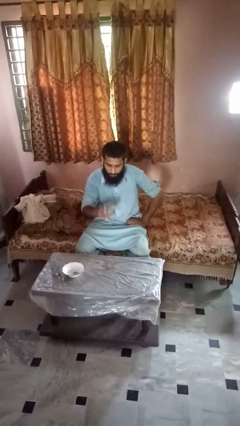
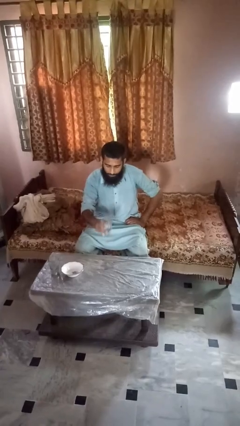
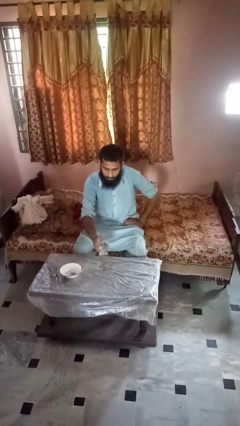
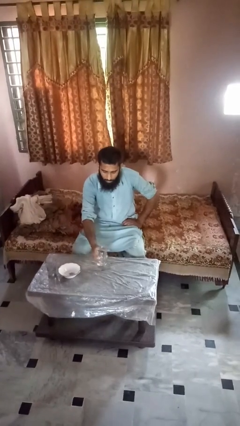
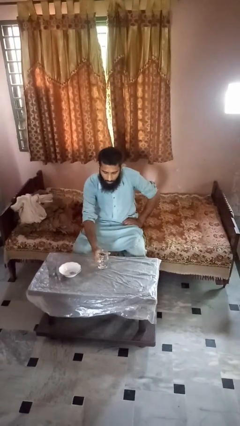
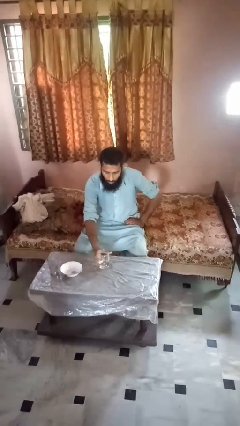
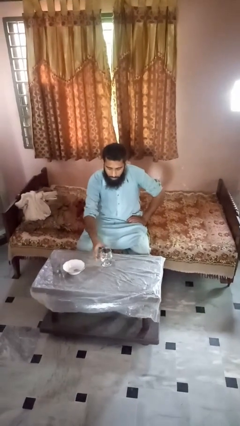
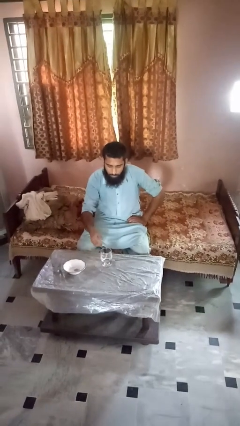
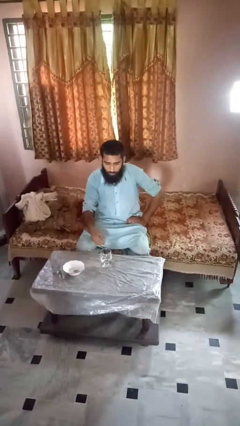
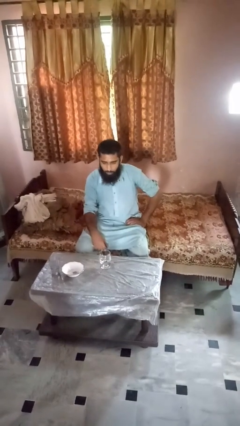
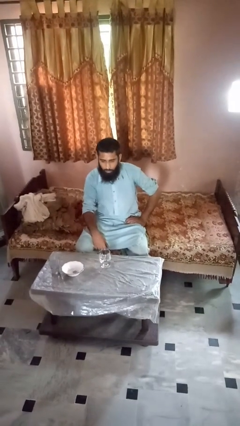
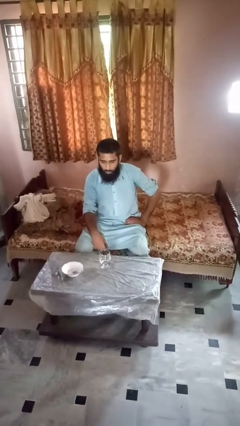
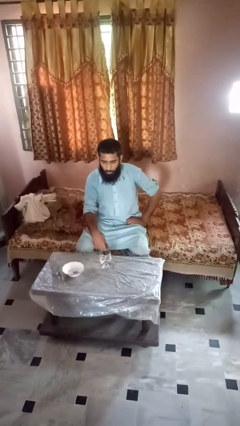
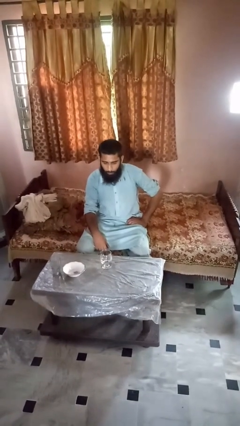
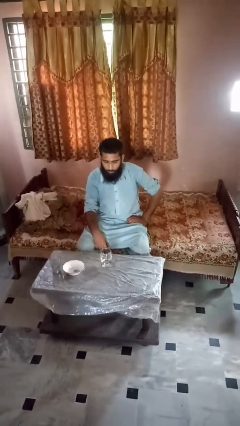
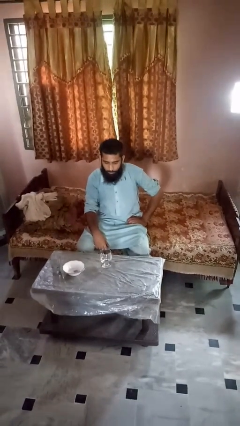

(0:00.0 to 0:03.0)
person puts down object on table

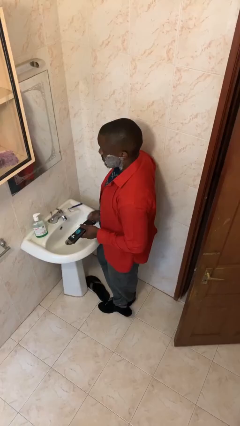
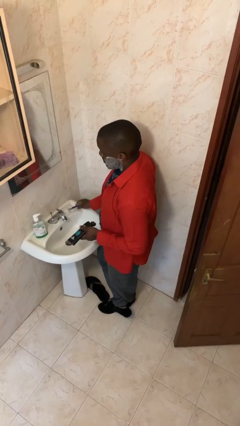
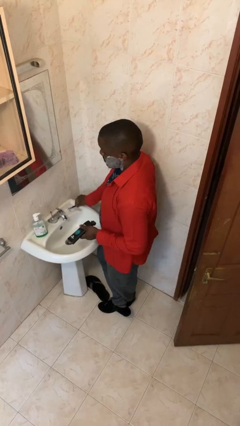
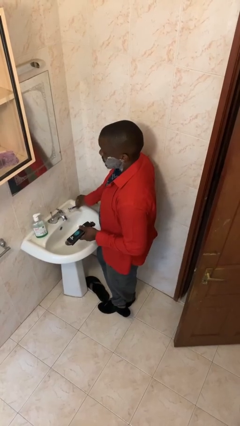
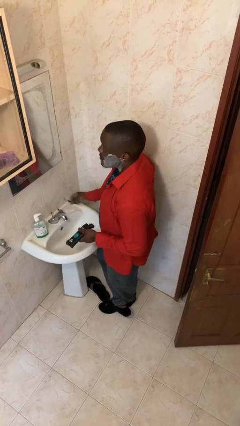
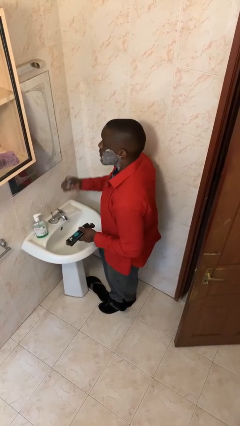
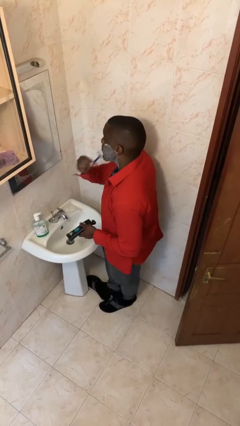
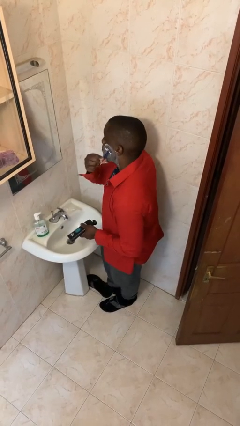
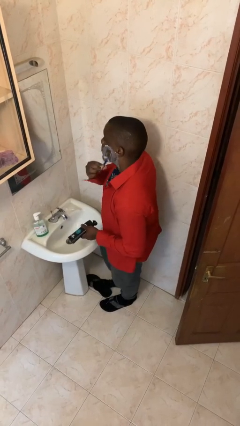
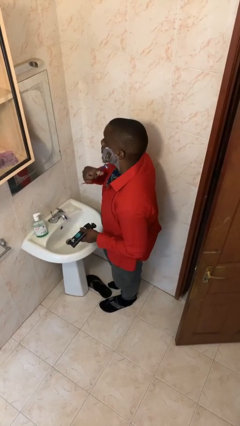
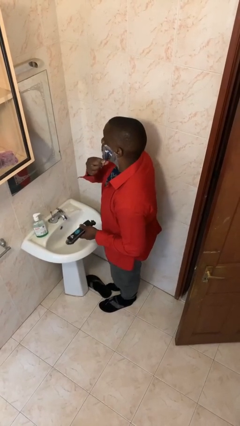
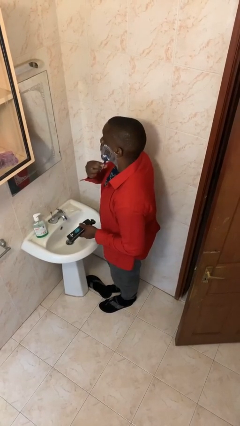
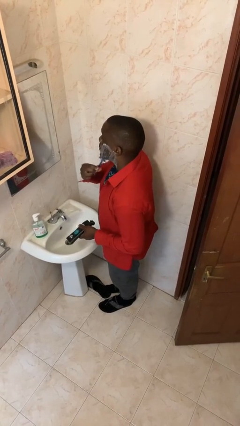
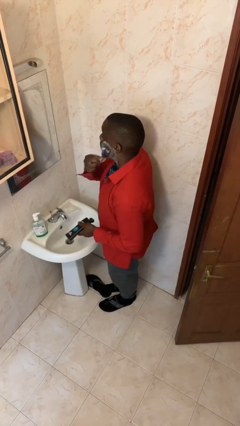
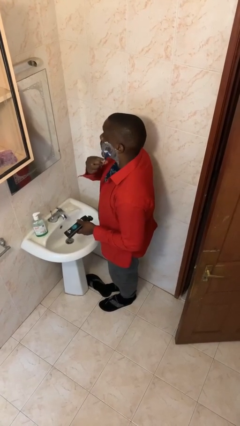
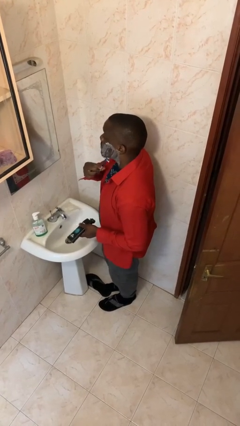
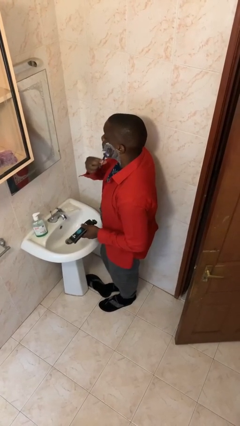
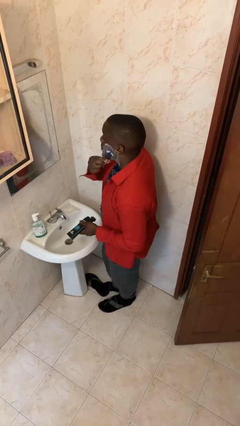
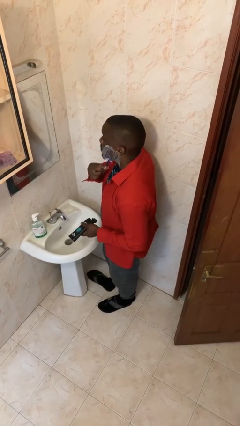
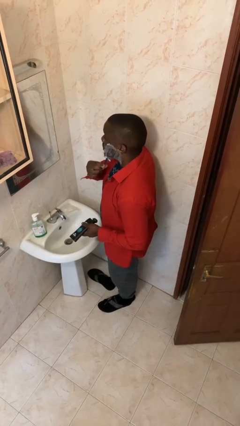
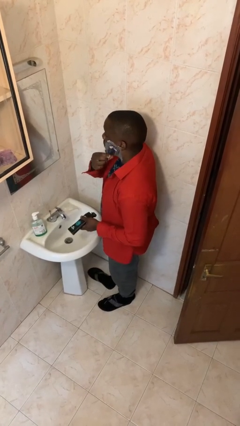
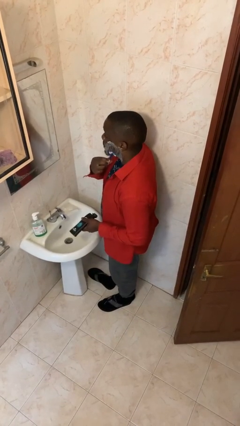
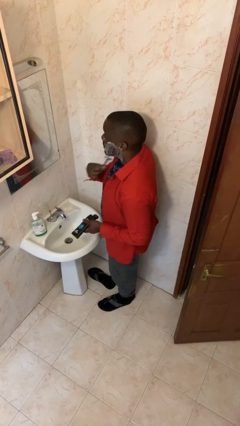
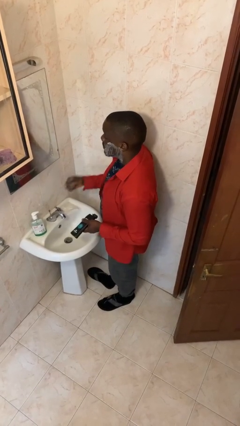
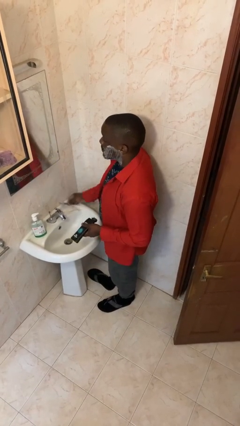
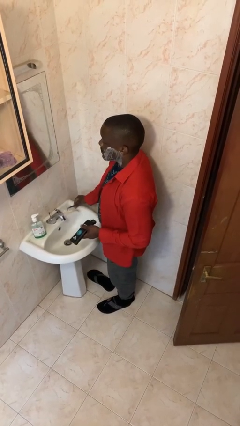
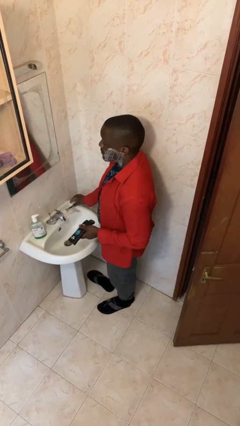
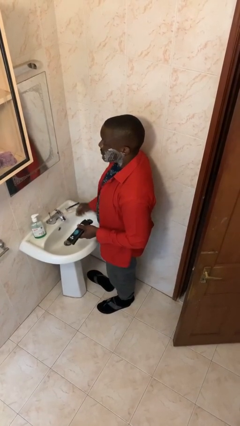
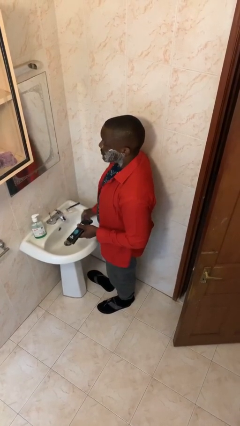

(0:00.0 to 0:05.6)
person shaves face

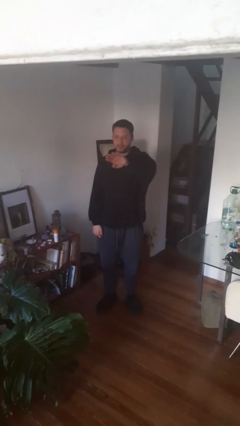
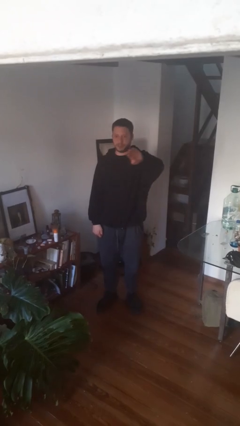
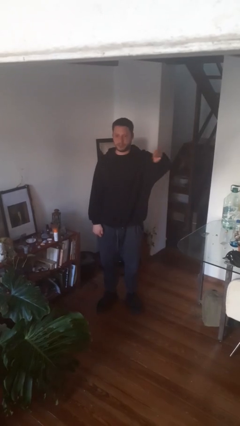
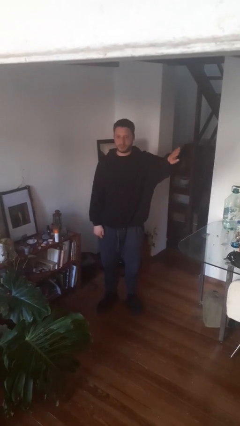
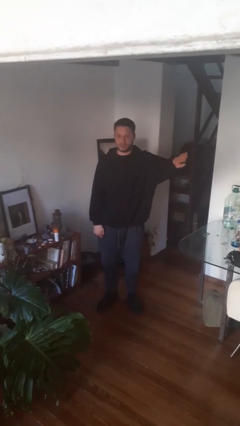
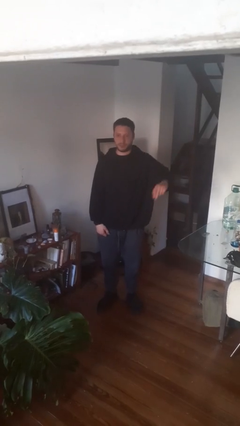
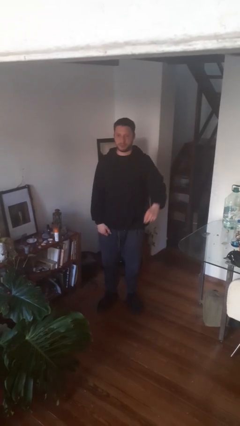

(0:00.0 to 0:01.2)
person gestures swipe left

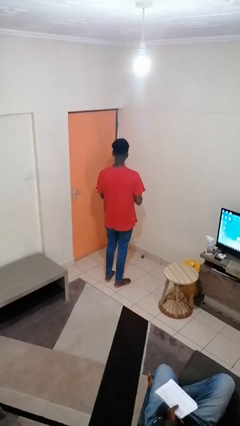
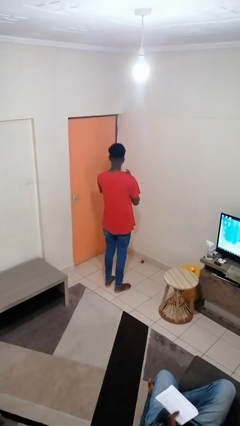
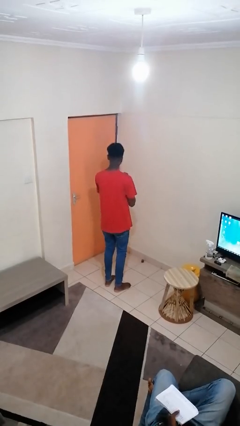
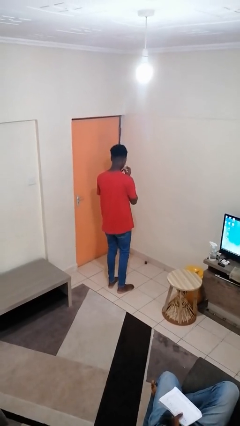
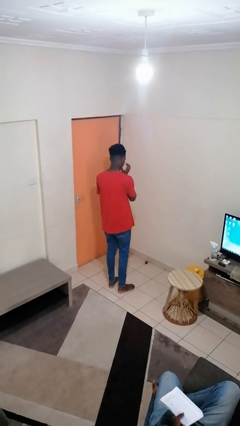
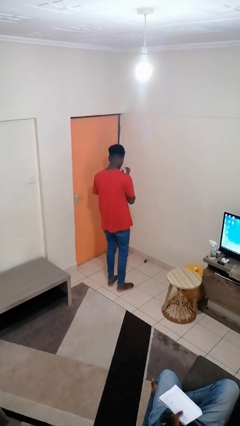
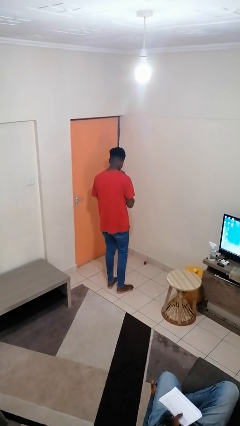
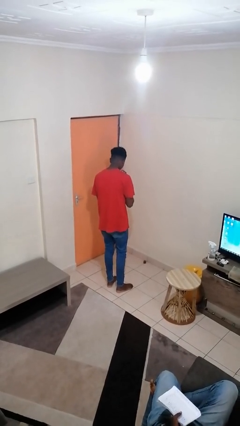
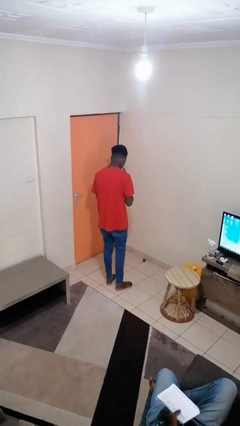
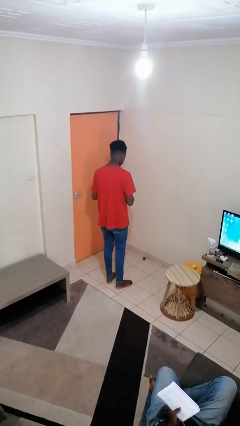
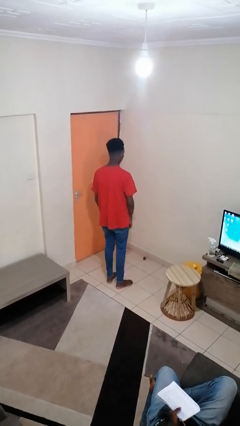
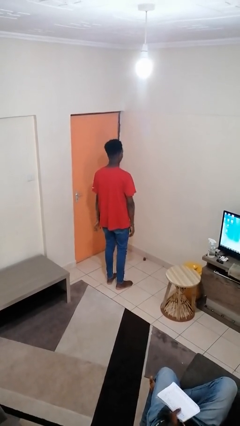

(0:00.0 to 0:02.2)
person licks fingers

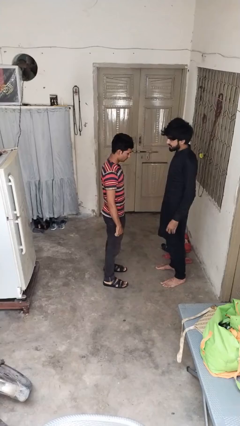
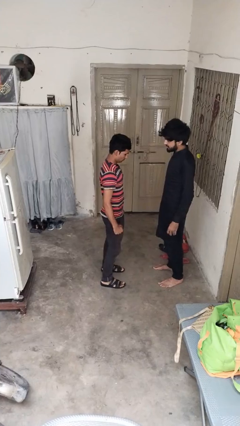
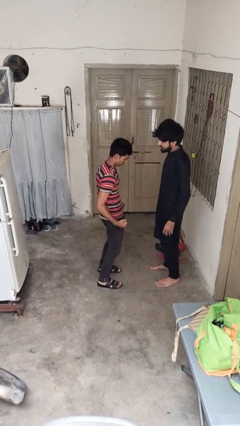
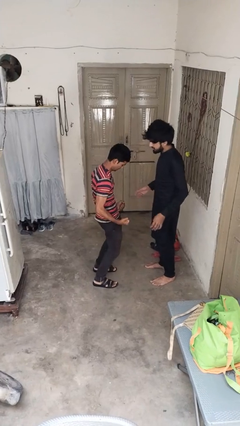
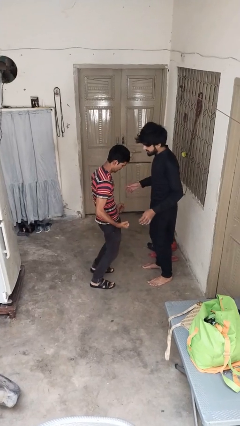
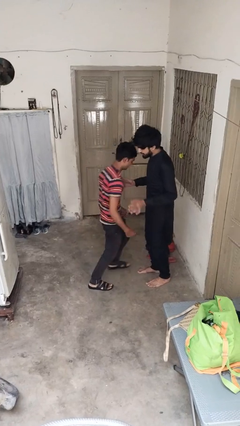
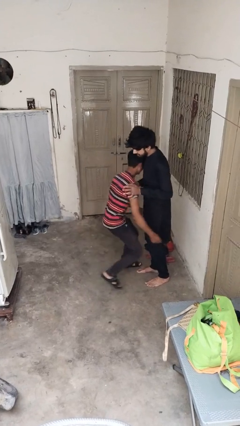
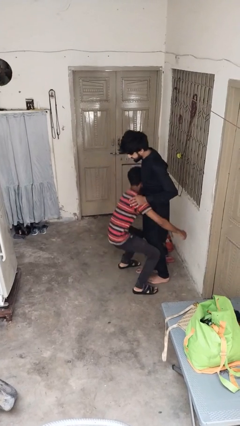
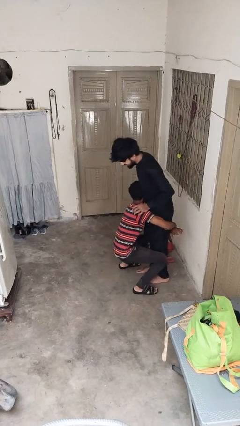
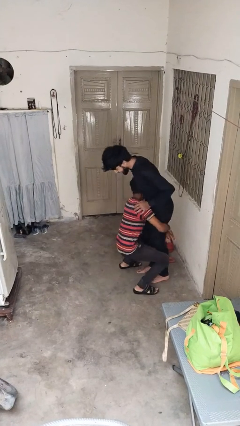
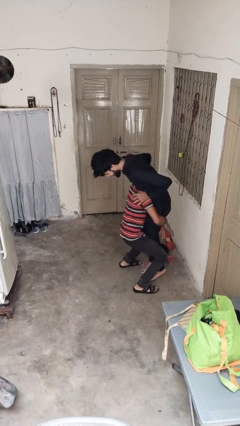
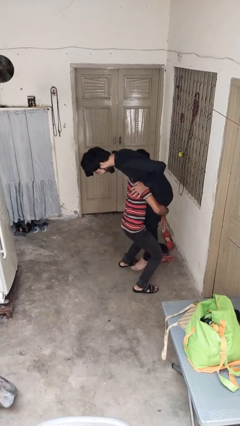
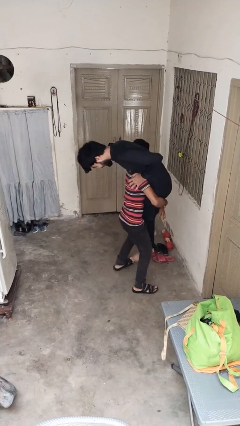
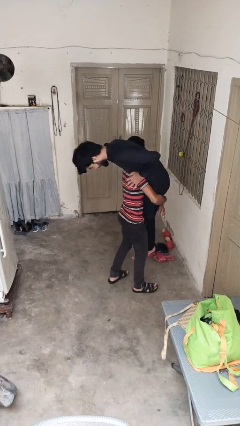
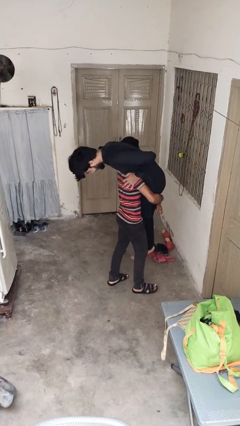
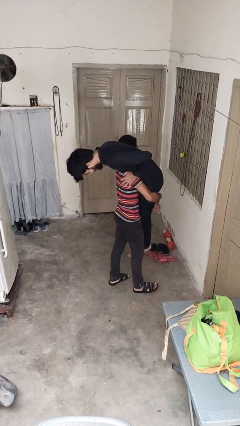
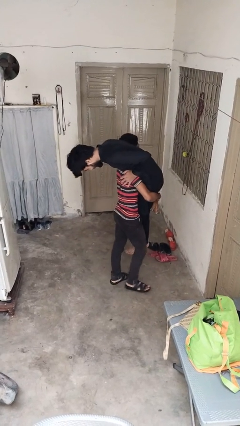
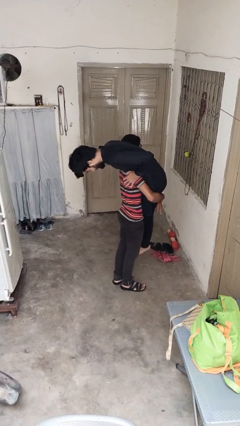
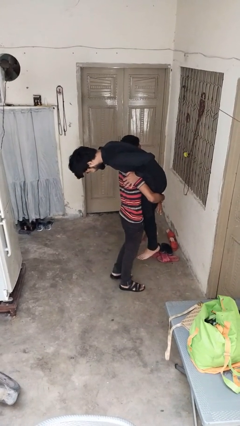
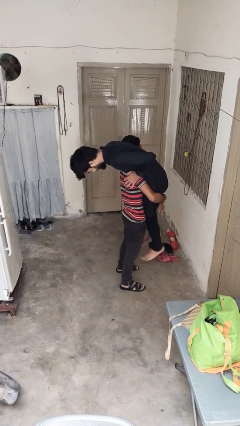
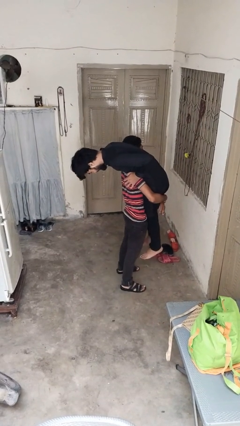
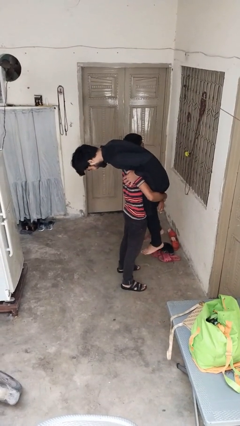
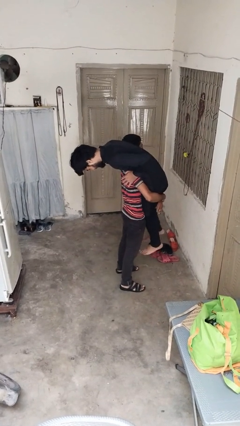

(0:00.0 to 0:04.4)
person carries person over shoulder

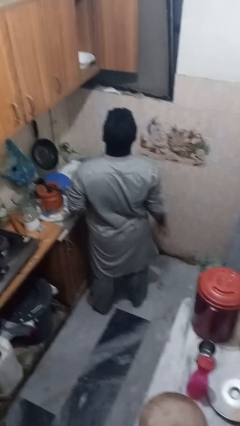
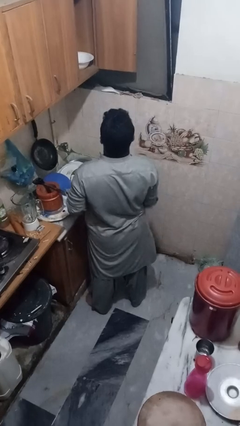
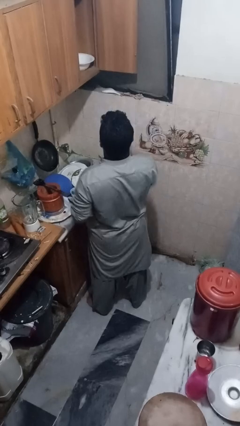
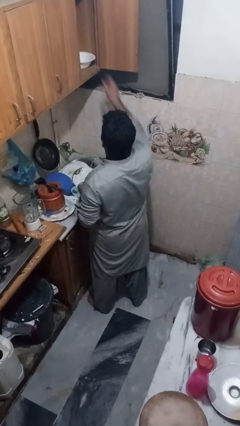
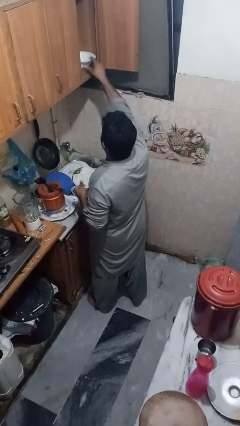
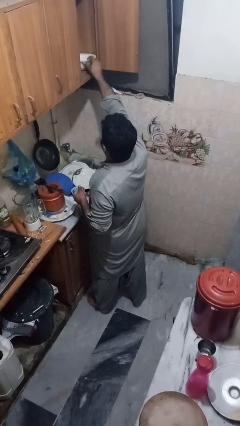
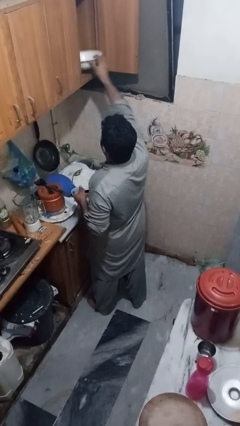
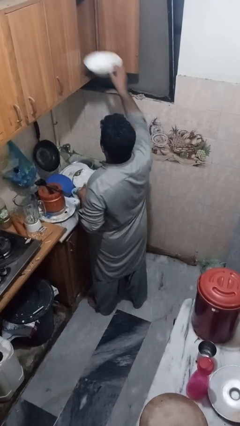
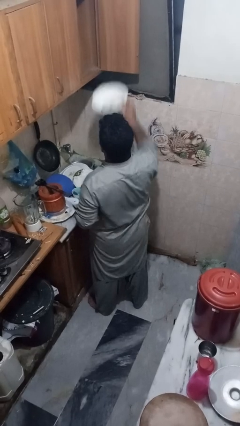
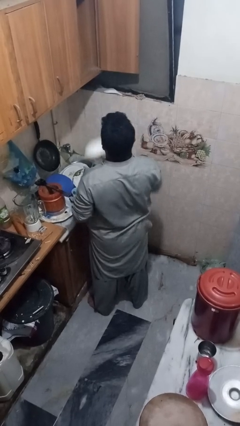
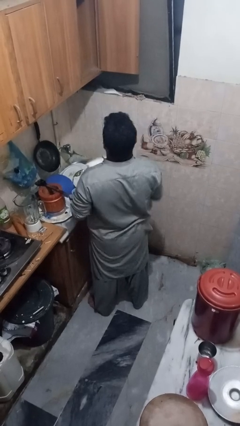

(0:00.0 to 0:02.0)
person takes object from cabinet
